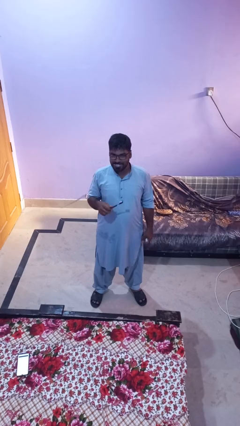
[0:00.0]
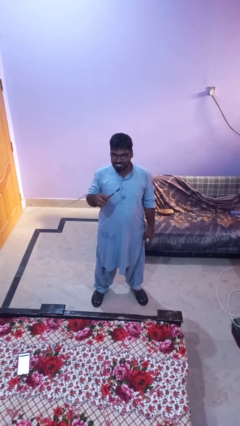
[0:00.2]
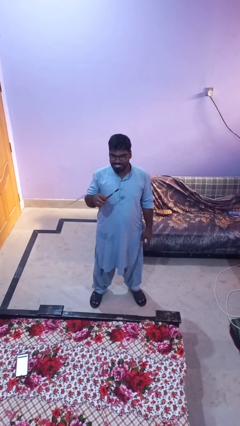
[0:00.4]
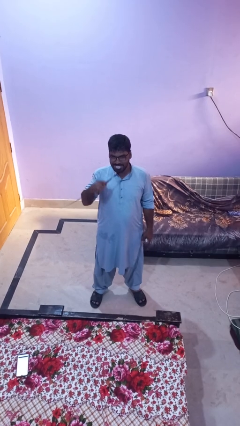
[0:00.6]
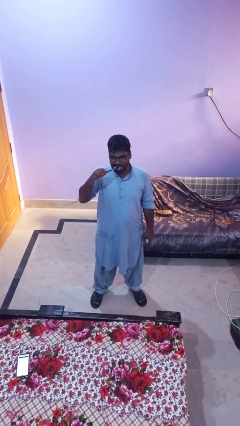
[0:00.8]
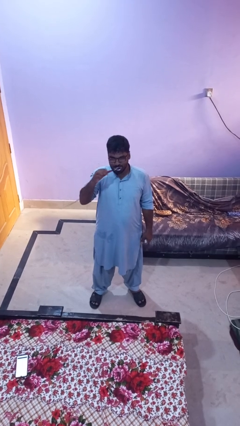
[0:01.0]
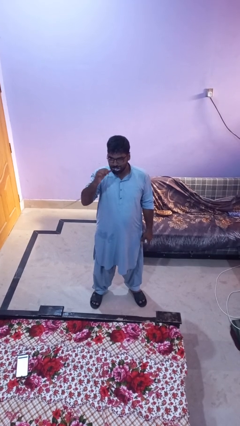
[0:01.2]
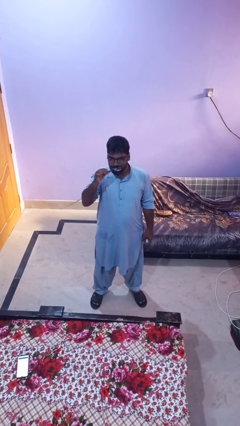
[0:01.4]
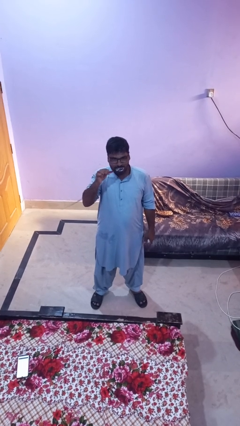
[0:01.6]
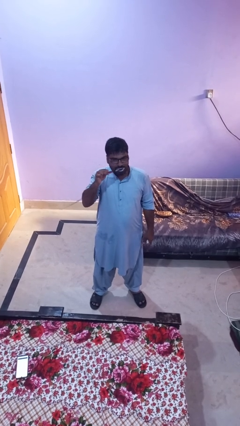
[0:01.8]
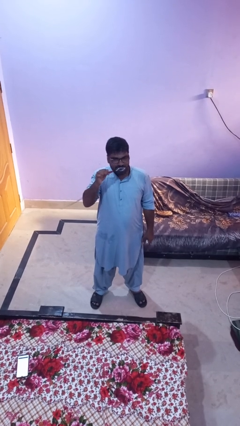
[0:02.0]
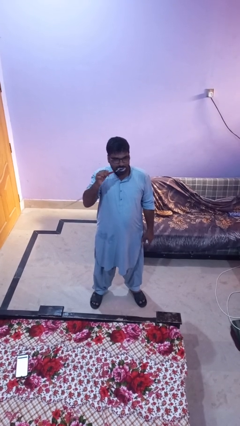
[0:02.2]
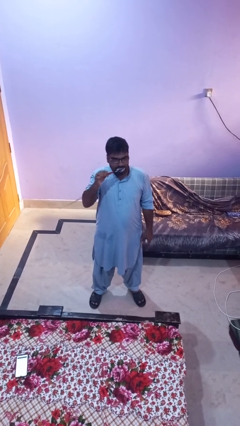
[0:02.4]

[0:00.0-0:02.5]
person brushes teeth

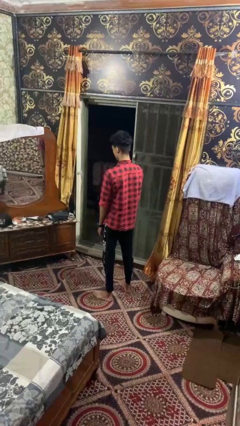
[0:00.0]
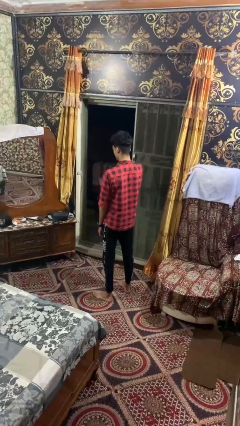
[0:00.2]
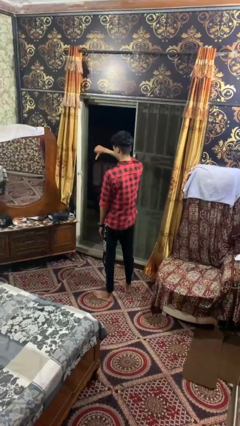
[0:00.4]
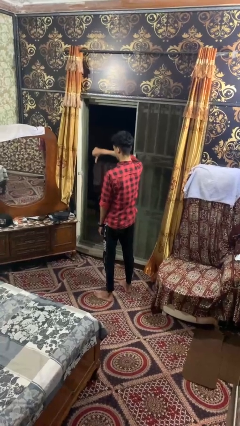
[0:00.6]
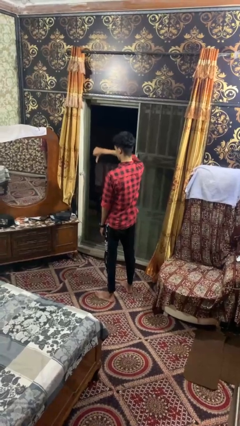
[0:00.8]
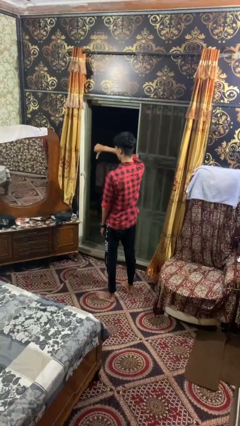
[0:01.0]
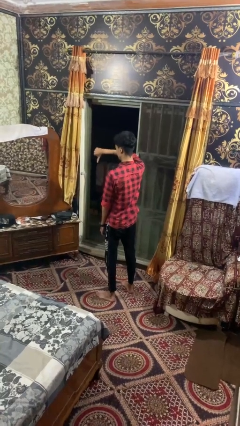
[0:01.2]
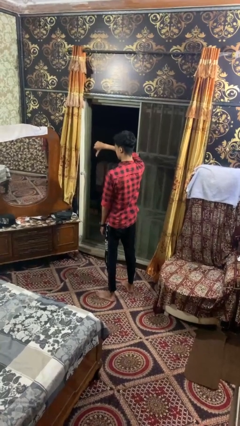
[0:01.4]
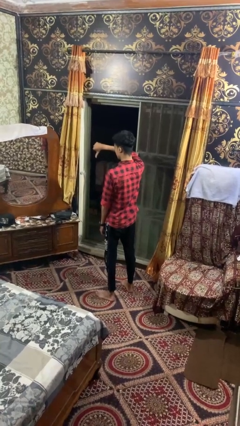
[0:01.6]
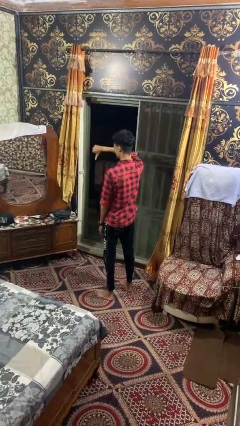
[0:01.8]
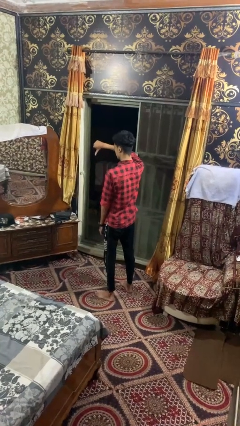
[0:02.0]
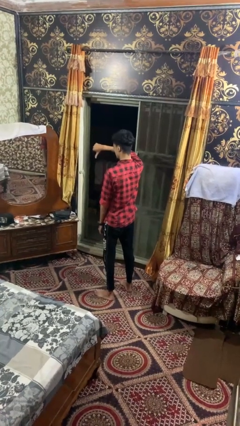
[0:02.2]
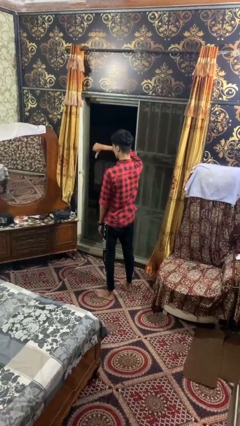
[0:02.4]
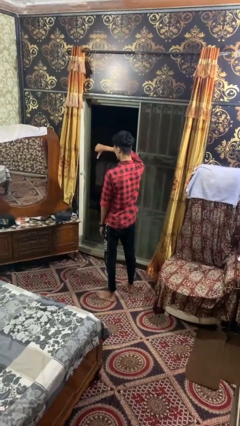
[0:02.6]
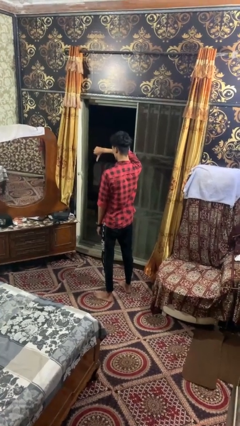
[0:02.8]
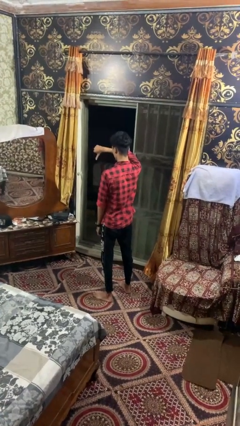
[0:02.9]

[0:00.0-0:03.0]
person gestures thumbs down

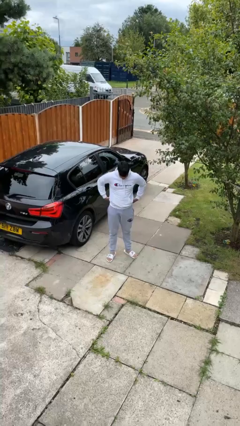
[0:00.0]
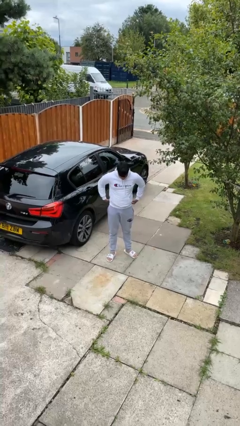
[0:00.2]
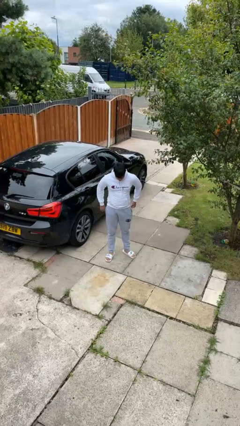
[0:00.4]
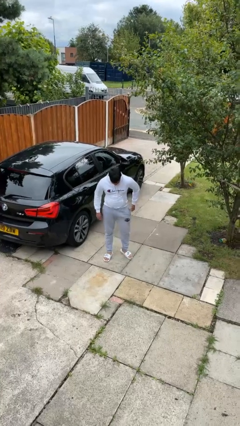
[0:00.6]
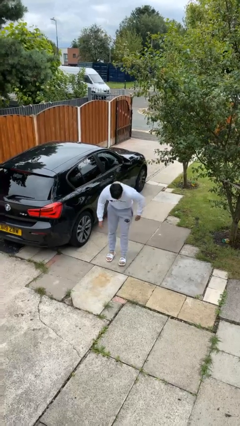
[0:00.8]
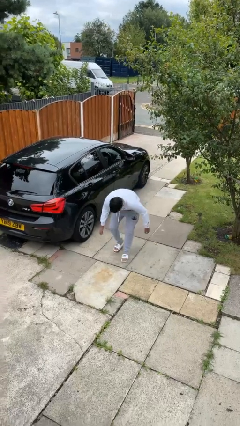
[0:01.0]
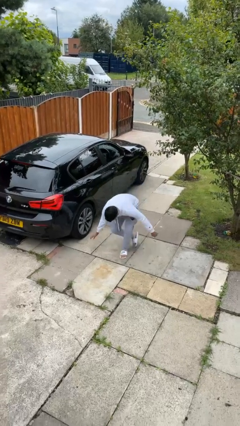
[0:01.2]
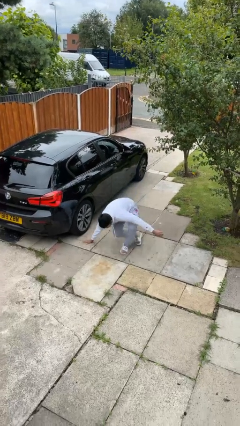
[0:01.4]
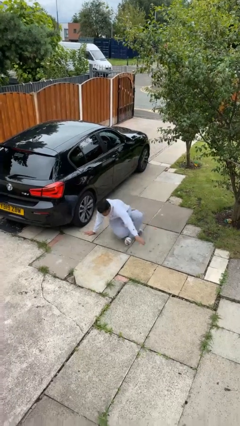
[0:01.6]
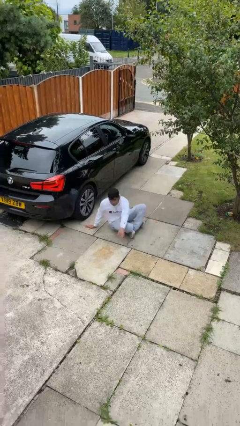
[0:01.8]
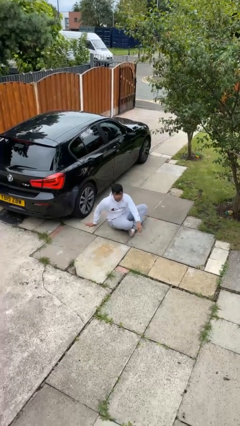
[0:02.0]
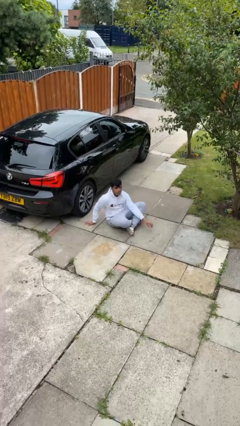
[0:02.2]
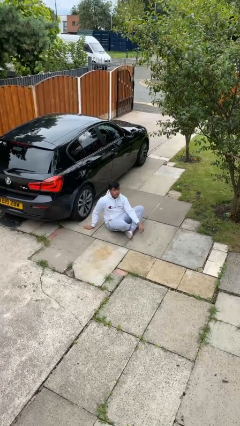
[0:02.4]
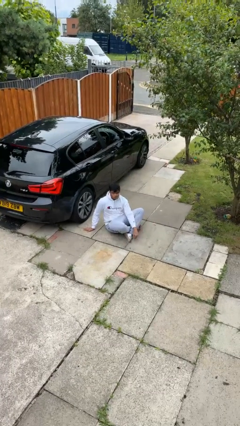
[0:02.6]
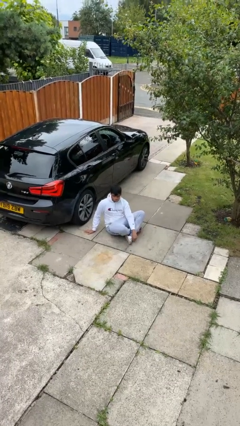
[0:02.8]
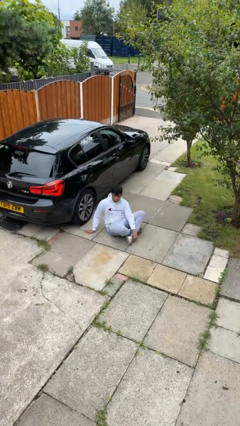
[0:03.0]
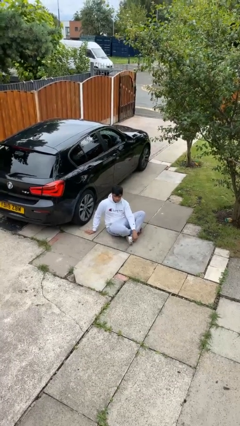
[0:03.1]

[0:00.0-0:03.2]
person sits crisscross

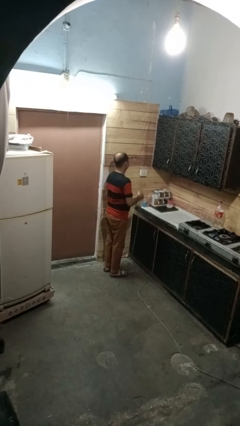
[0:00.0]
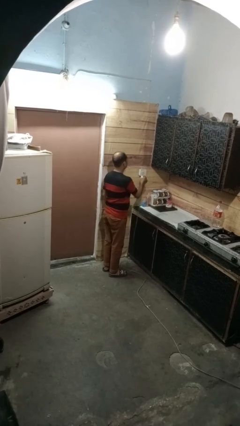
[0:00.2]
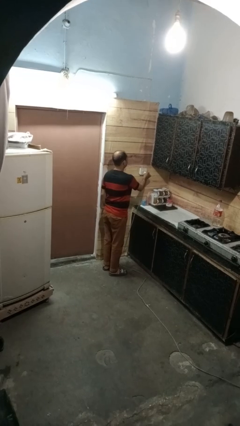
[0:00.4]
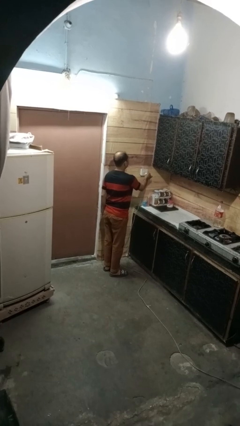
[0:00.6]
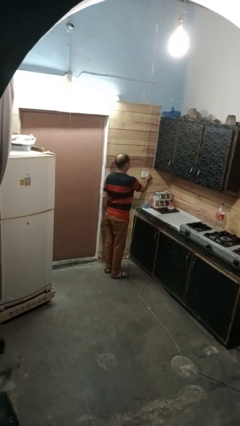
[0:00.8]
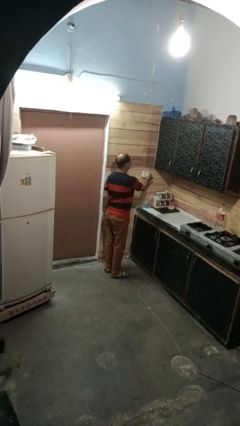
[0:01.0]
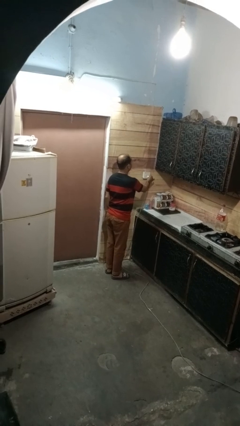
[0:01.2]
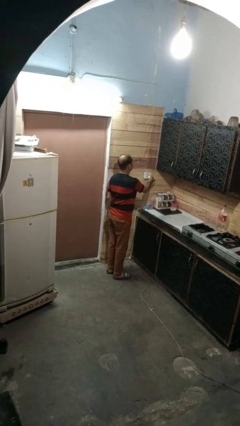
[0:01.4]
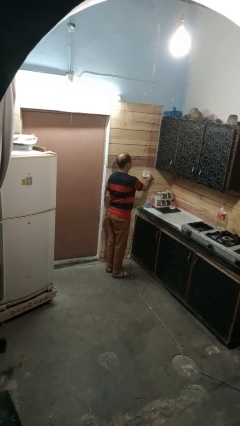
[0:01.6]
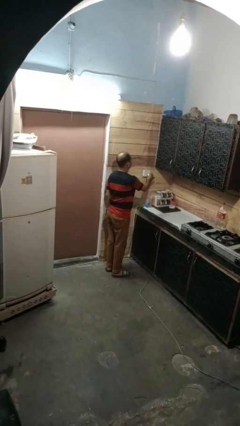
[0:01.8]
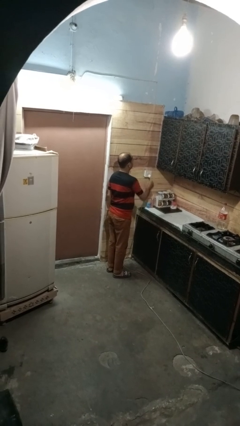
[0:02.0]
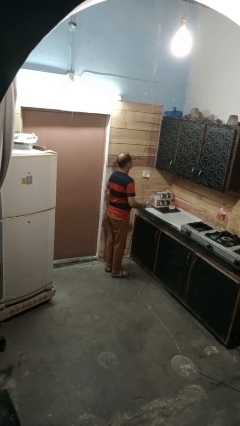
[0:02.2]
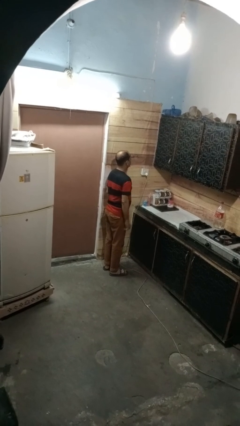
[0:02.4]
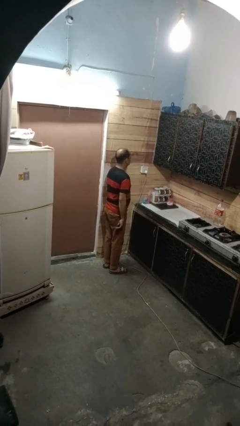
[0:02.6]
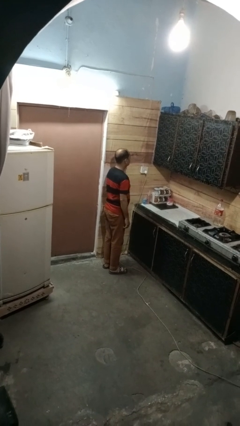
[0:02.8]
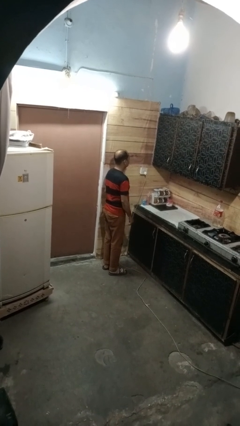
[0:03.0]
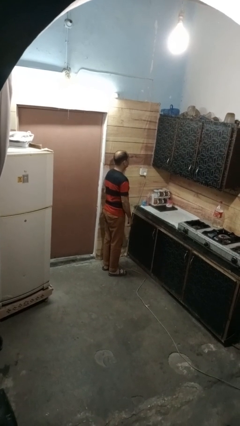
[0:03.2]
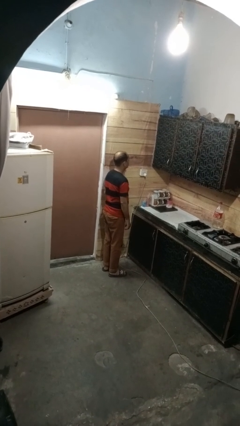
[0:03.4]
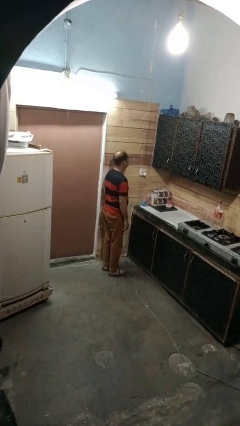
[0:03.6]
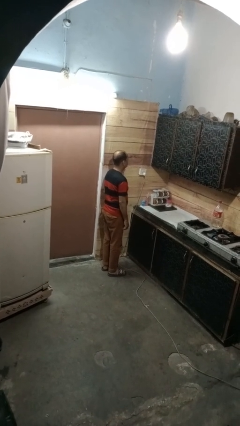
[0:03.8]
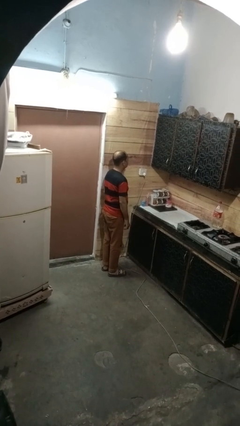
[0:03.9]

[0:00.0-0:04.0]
person plugs into electrical socket

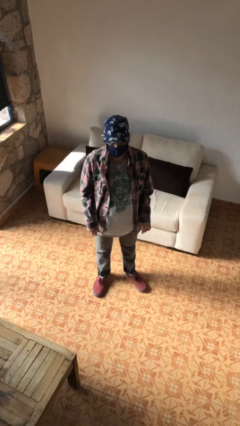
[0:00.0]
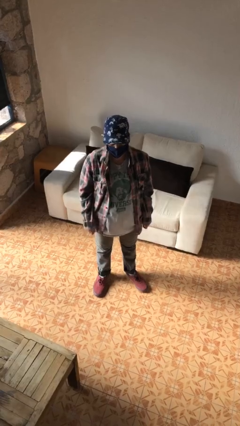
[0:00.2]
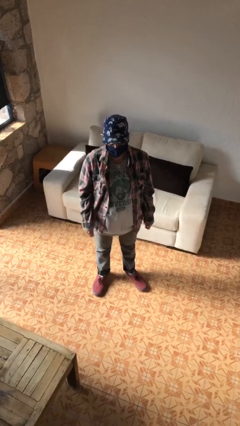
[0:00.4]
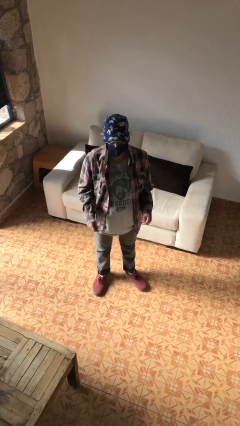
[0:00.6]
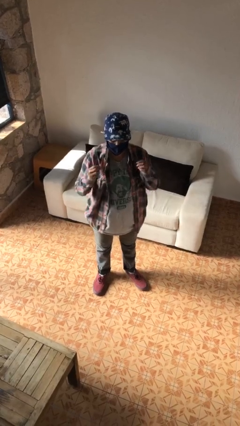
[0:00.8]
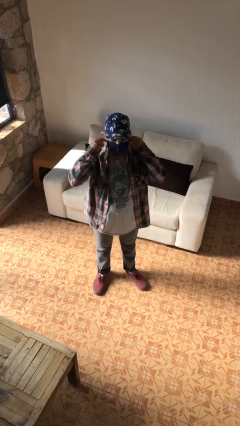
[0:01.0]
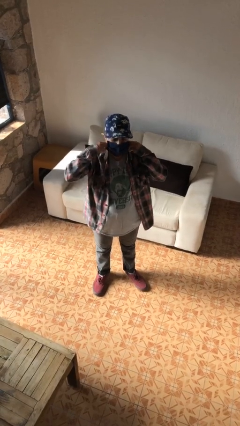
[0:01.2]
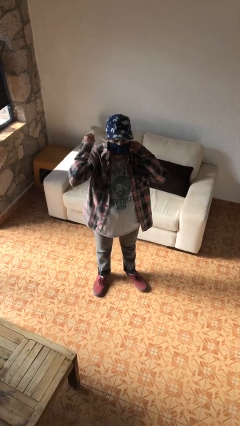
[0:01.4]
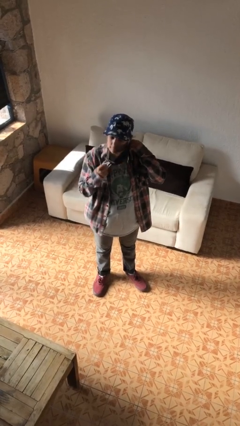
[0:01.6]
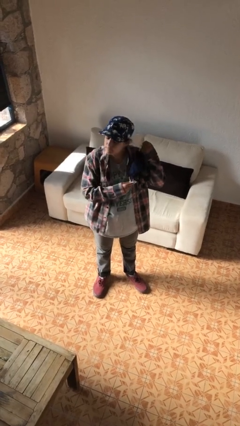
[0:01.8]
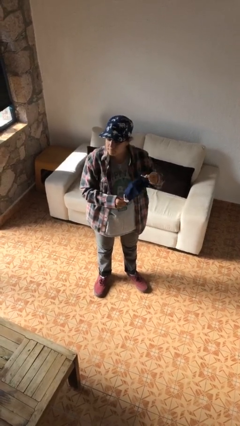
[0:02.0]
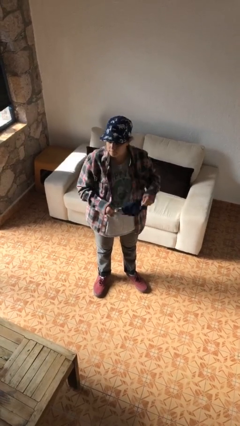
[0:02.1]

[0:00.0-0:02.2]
person takes off facemask

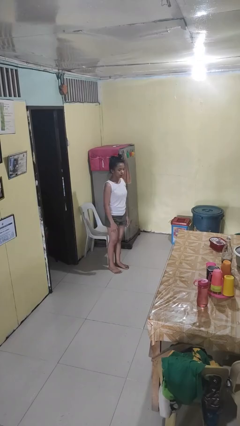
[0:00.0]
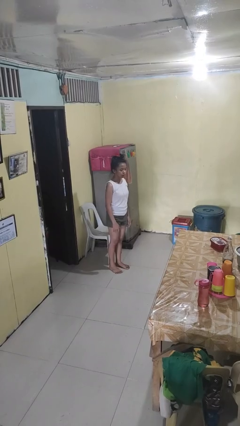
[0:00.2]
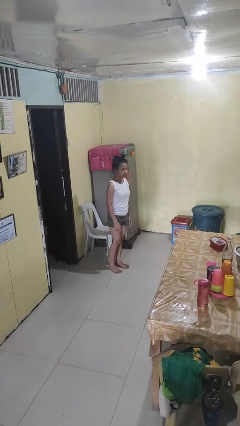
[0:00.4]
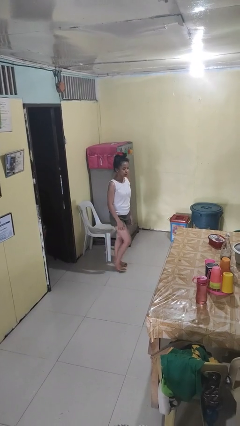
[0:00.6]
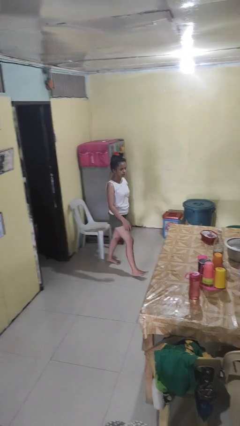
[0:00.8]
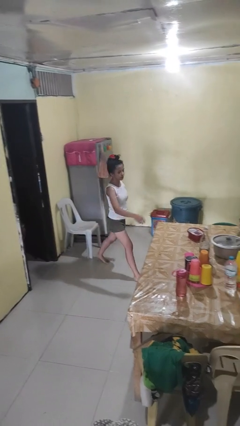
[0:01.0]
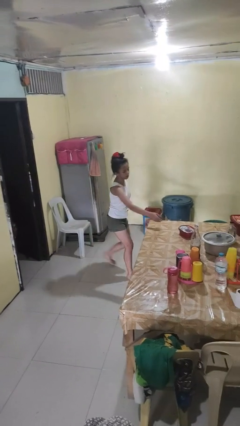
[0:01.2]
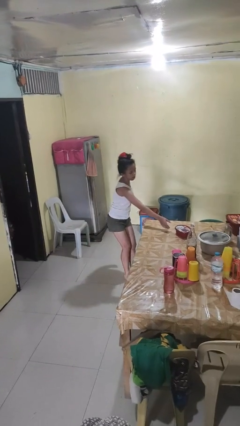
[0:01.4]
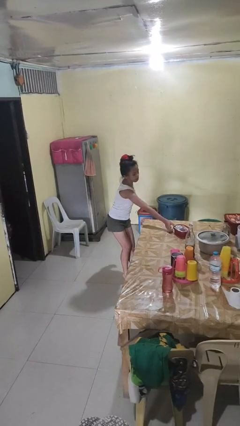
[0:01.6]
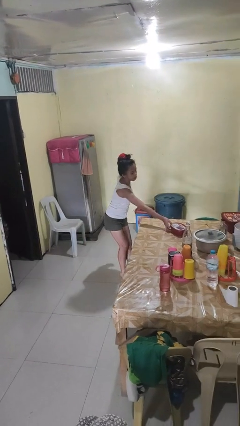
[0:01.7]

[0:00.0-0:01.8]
person picks up object from table

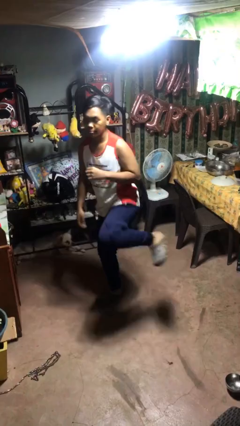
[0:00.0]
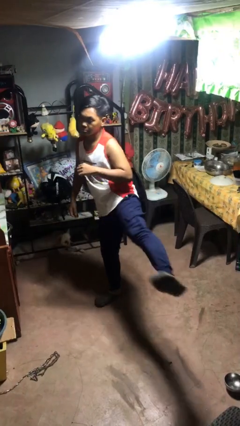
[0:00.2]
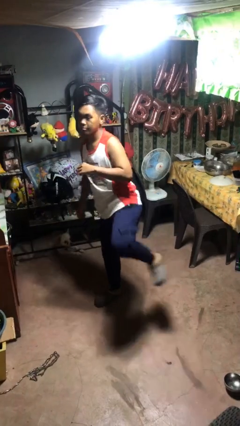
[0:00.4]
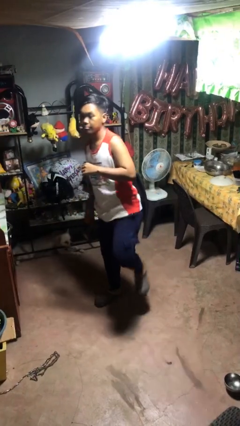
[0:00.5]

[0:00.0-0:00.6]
person karate kicks
